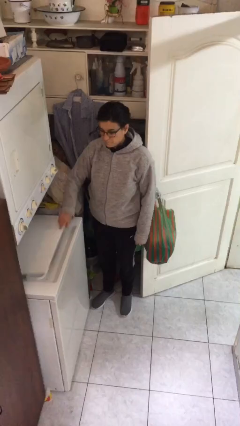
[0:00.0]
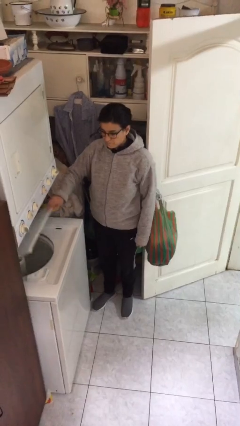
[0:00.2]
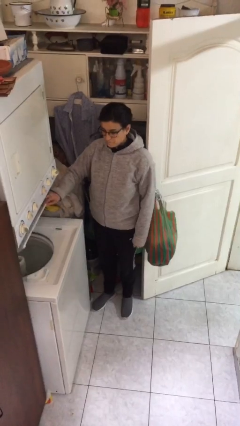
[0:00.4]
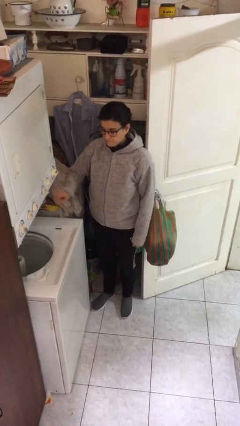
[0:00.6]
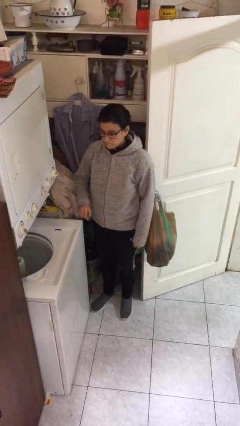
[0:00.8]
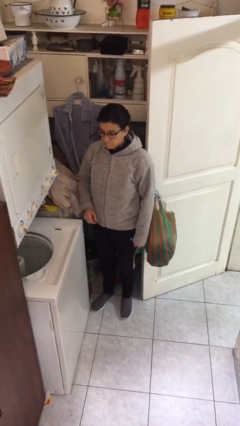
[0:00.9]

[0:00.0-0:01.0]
person opens clothes washer

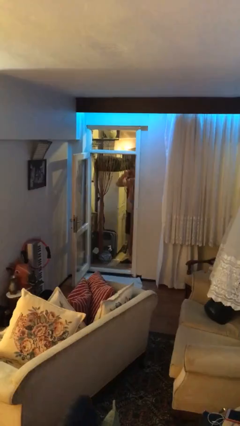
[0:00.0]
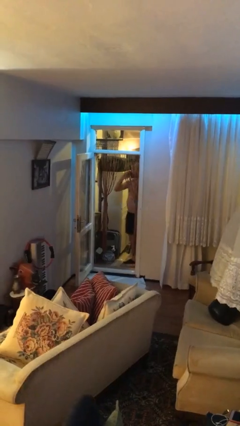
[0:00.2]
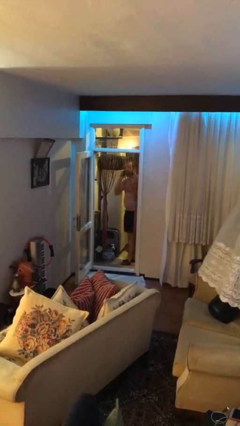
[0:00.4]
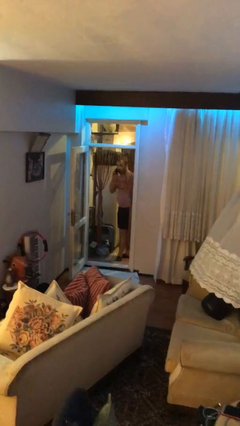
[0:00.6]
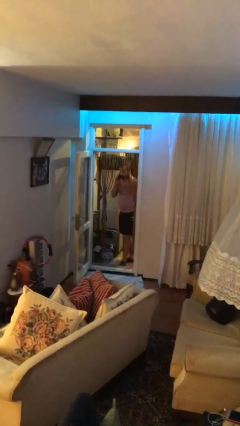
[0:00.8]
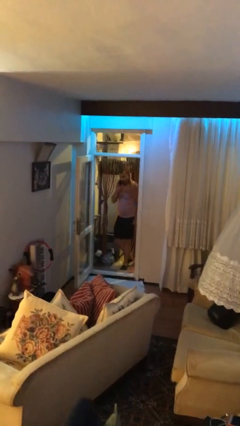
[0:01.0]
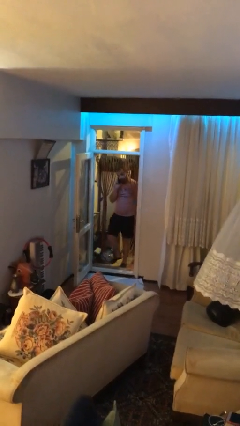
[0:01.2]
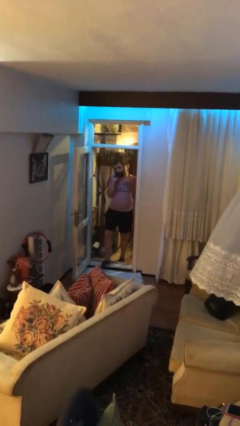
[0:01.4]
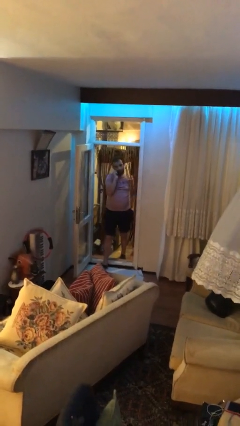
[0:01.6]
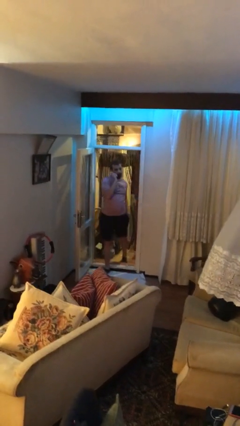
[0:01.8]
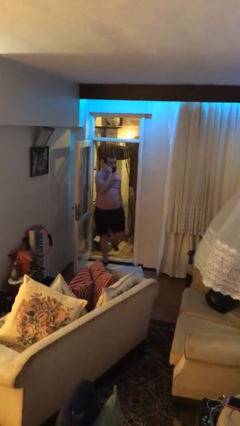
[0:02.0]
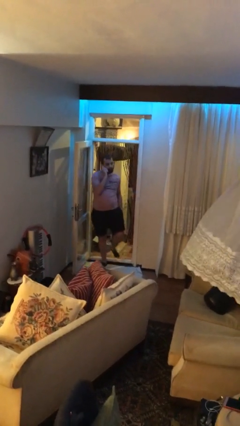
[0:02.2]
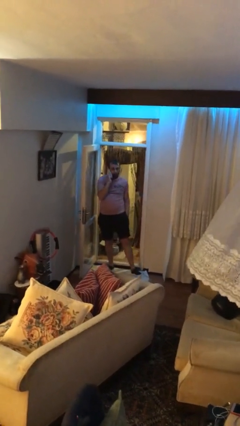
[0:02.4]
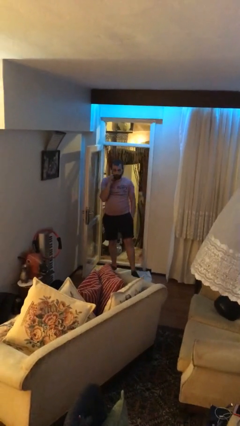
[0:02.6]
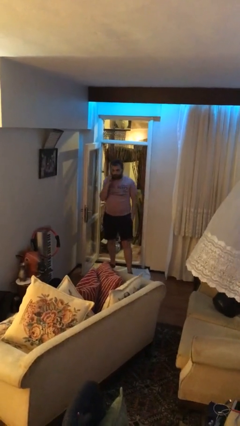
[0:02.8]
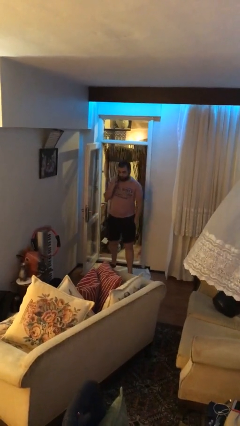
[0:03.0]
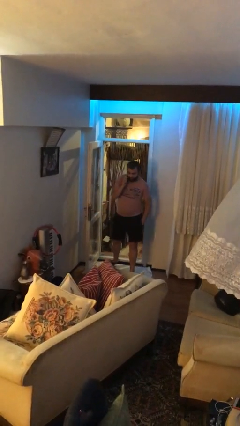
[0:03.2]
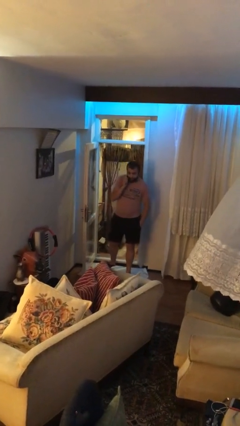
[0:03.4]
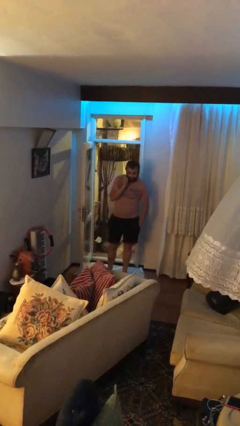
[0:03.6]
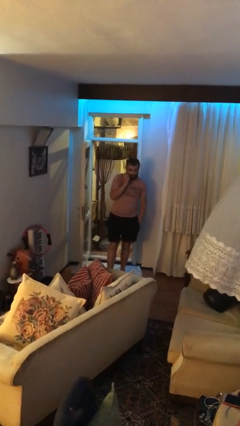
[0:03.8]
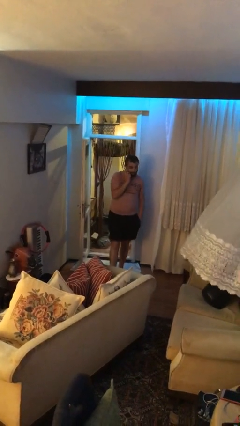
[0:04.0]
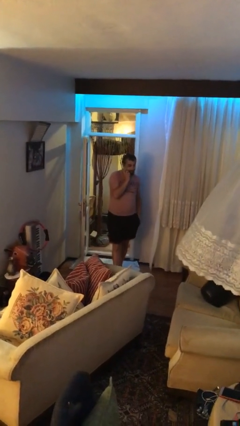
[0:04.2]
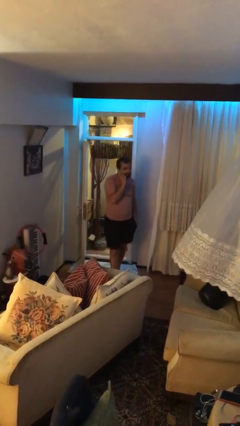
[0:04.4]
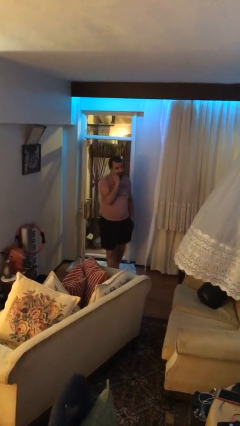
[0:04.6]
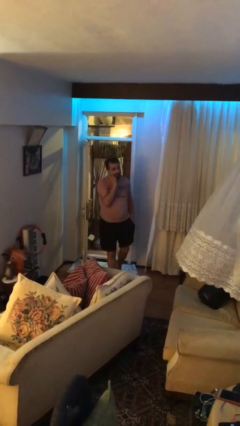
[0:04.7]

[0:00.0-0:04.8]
person enters scene through structure

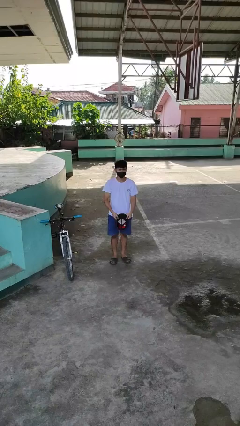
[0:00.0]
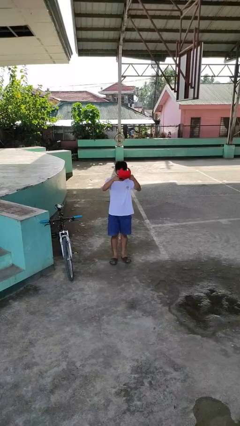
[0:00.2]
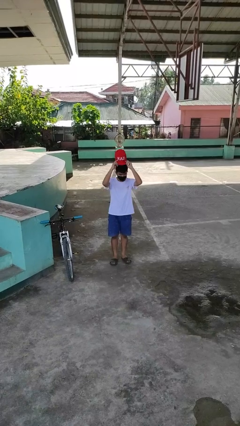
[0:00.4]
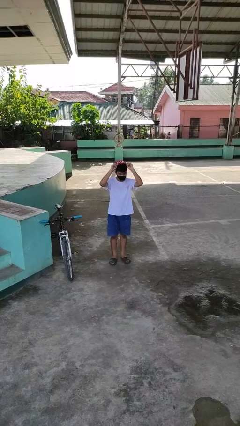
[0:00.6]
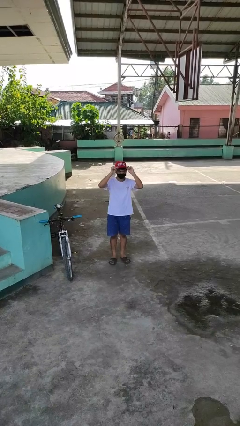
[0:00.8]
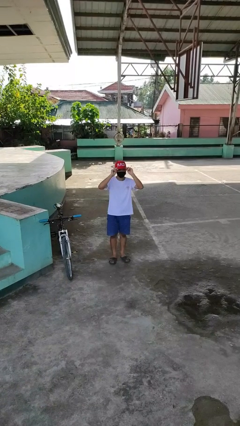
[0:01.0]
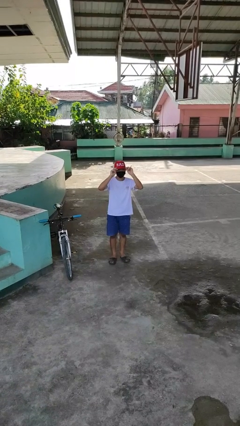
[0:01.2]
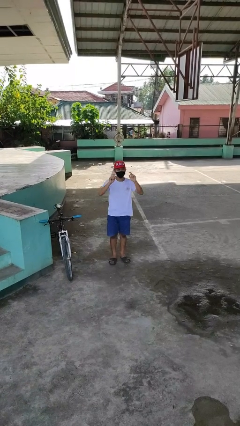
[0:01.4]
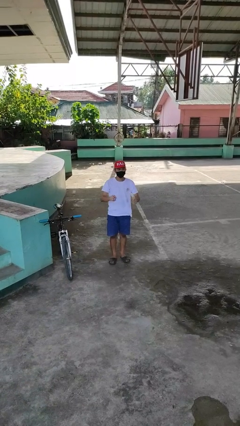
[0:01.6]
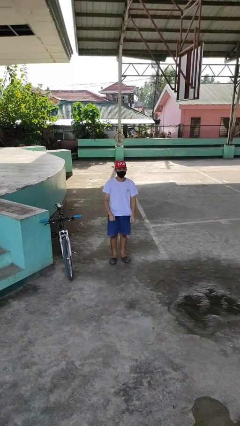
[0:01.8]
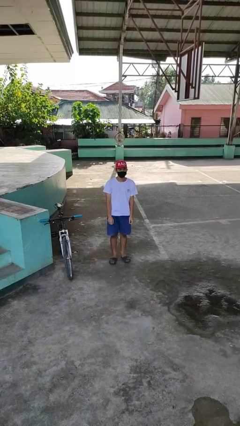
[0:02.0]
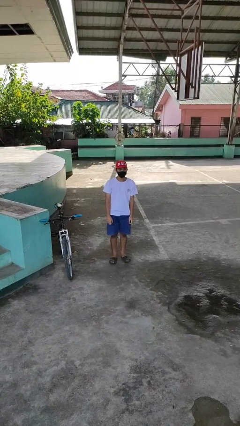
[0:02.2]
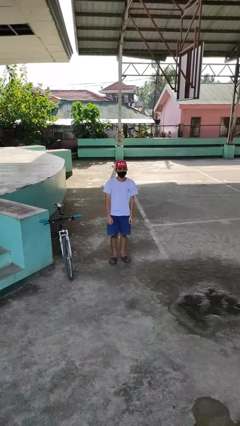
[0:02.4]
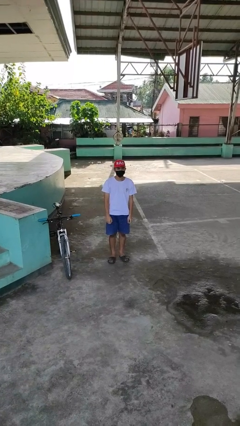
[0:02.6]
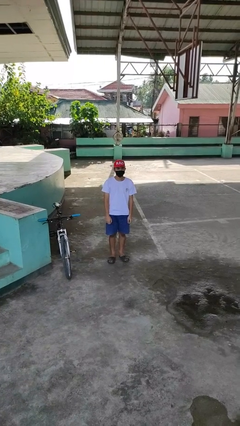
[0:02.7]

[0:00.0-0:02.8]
person puts on hat

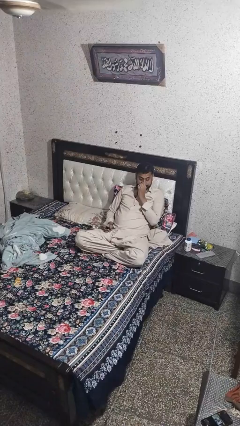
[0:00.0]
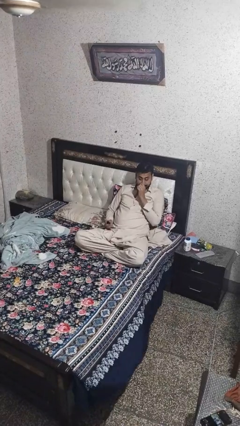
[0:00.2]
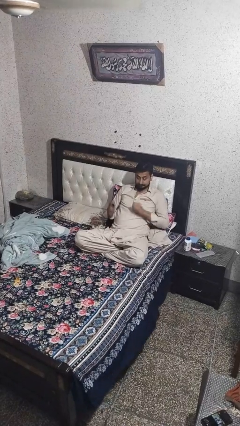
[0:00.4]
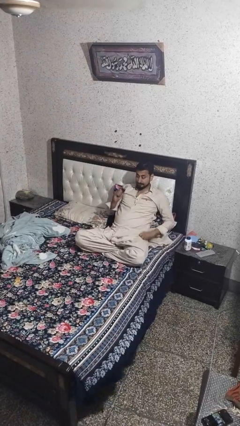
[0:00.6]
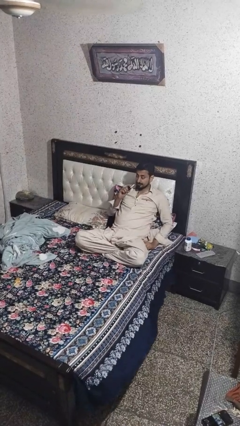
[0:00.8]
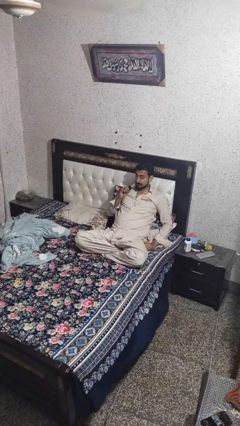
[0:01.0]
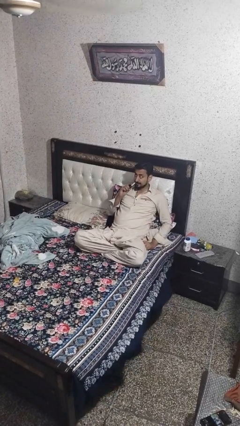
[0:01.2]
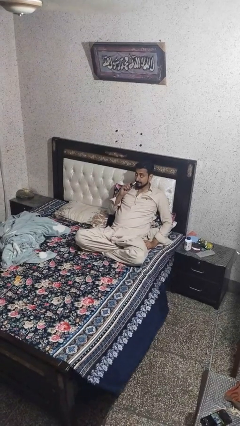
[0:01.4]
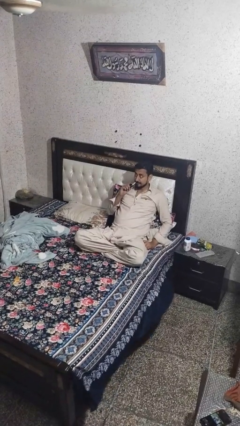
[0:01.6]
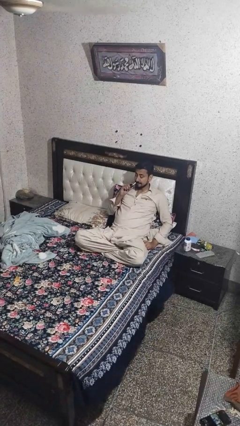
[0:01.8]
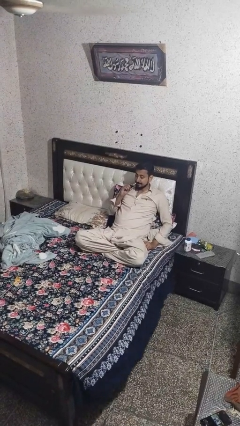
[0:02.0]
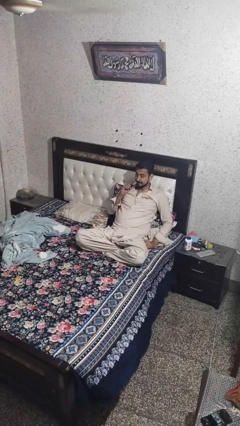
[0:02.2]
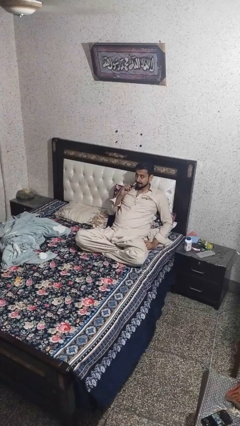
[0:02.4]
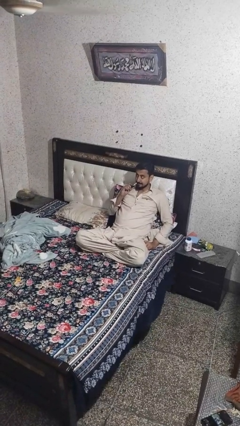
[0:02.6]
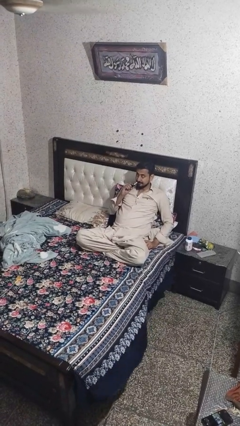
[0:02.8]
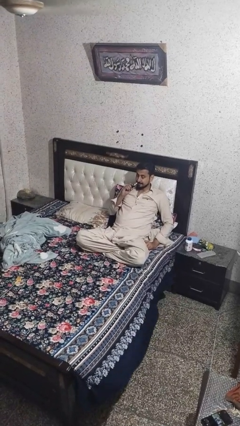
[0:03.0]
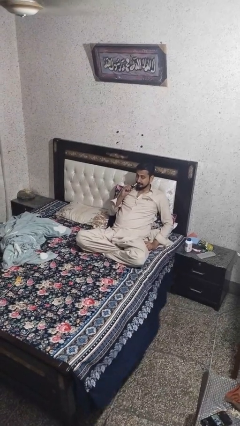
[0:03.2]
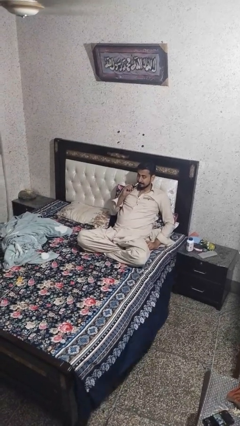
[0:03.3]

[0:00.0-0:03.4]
person vapes

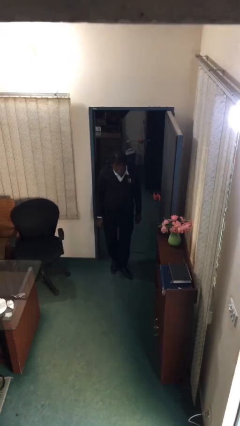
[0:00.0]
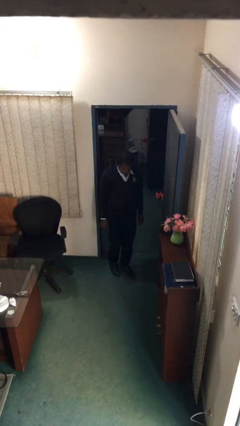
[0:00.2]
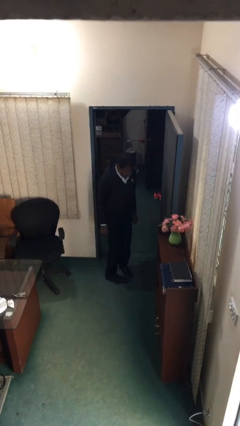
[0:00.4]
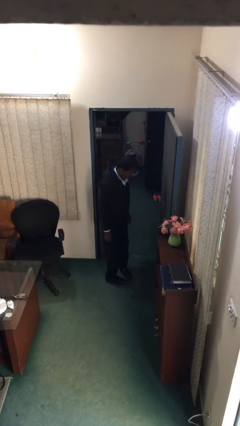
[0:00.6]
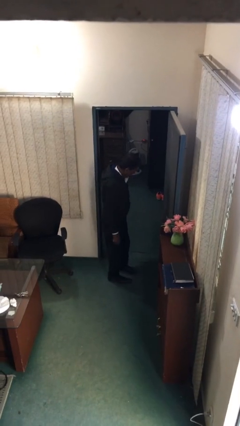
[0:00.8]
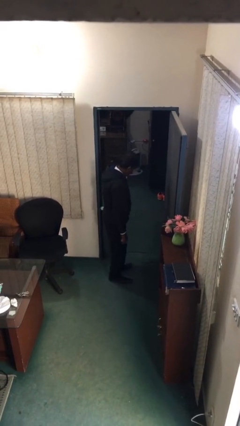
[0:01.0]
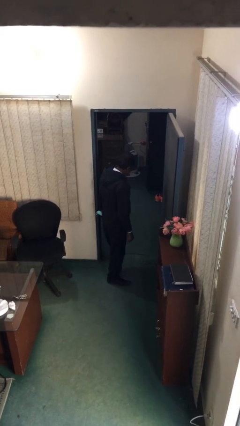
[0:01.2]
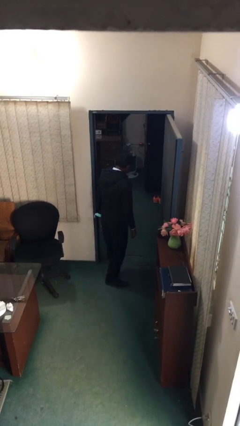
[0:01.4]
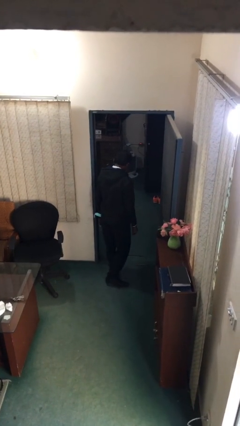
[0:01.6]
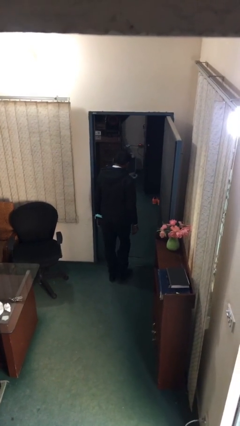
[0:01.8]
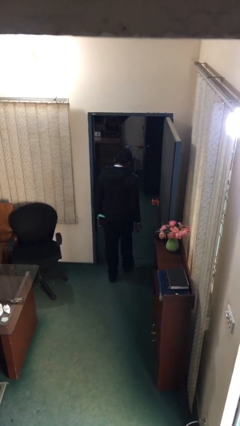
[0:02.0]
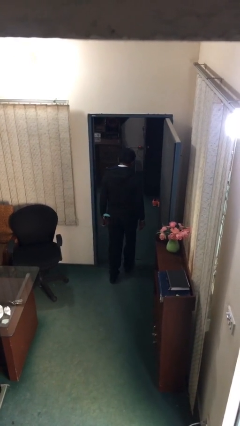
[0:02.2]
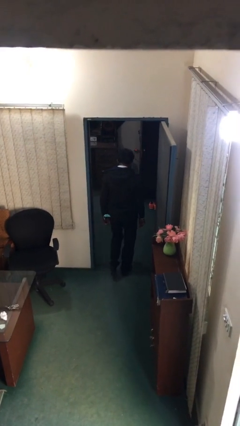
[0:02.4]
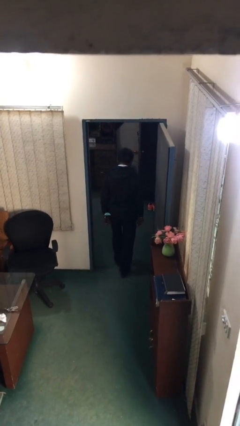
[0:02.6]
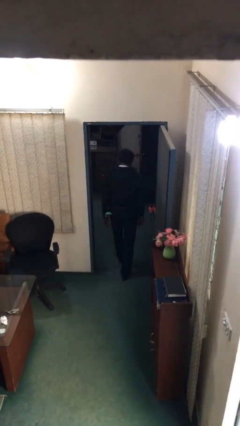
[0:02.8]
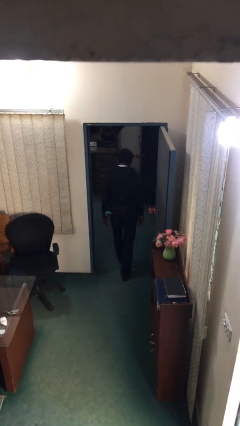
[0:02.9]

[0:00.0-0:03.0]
person exits scene through structure

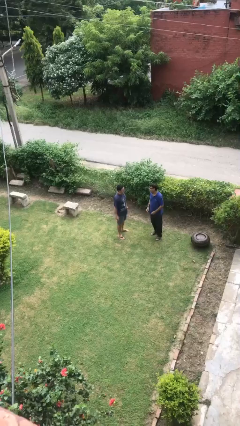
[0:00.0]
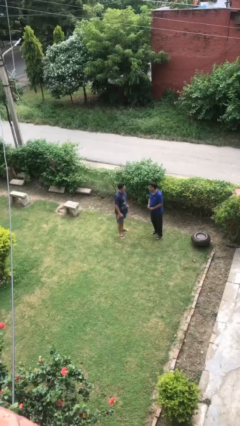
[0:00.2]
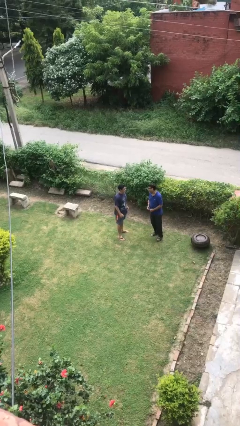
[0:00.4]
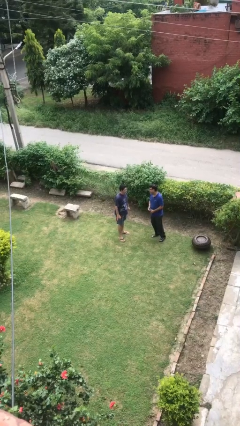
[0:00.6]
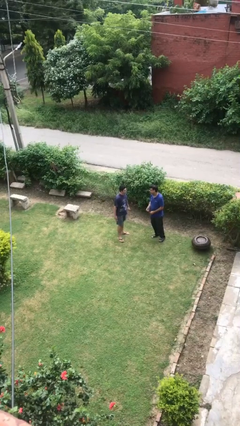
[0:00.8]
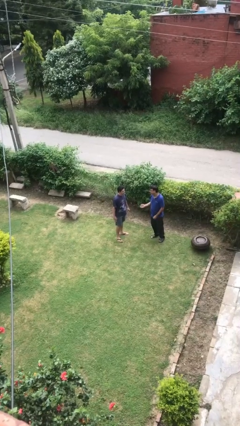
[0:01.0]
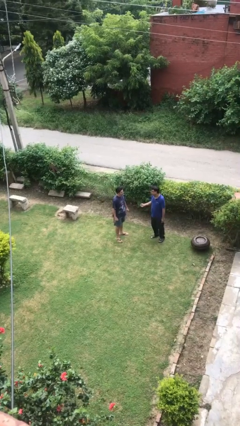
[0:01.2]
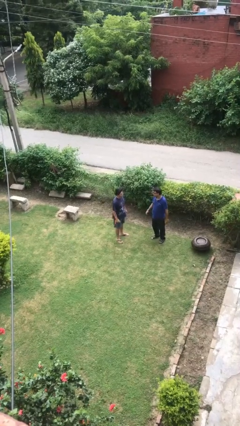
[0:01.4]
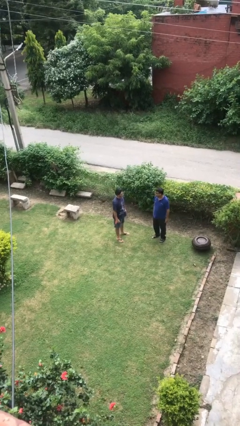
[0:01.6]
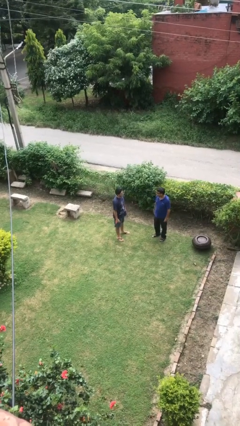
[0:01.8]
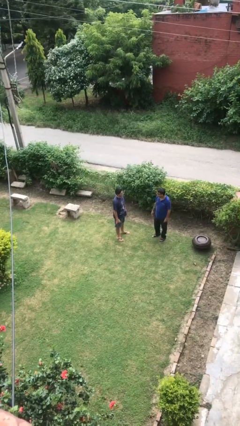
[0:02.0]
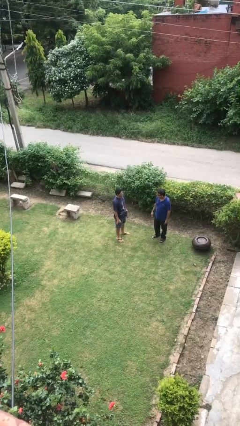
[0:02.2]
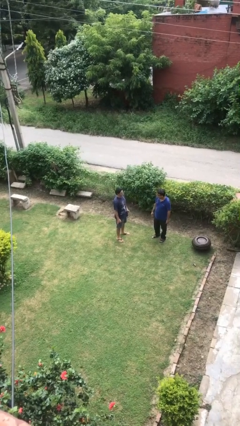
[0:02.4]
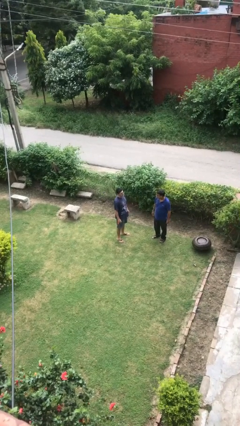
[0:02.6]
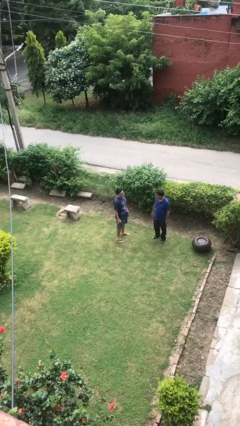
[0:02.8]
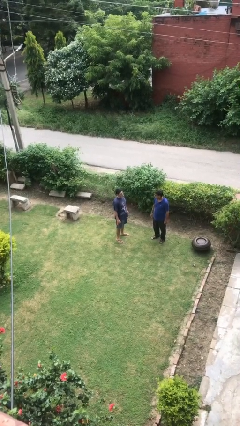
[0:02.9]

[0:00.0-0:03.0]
person talks to person
